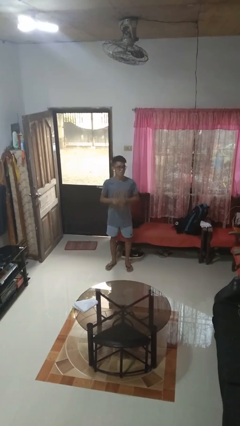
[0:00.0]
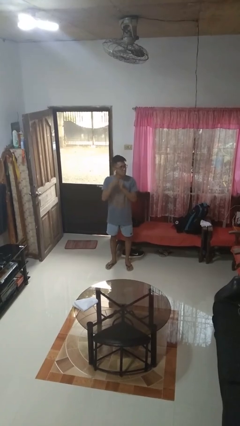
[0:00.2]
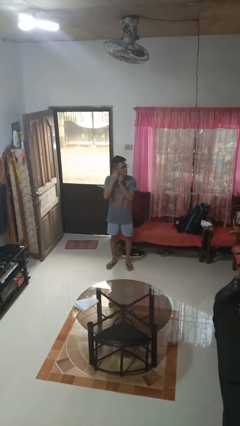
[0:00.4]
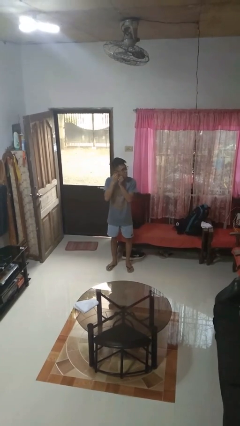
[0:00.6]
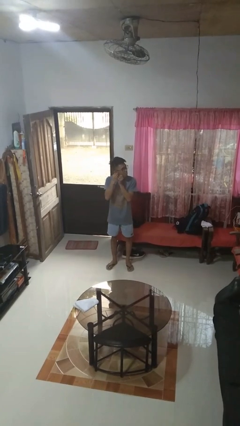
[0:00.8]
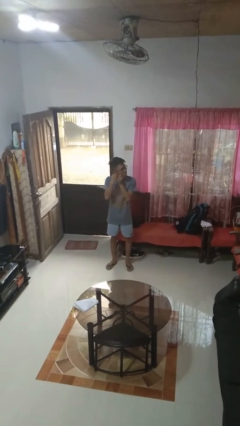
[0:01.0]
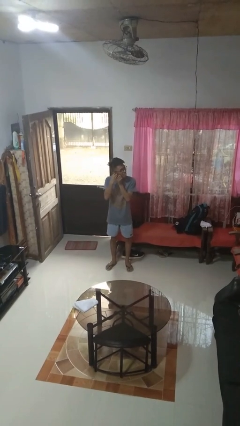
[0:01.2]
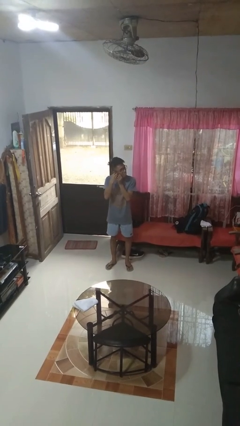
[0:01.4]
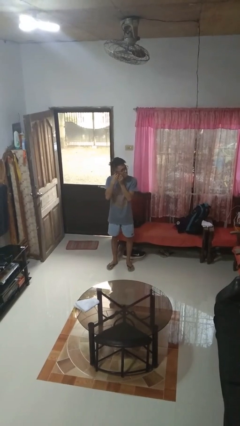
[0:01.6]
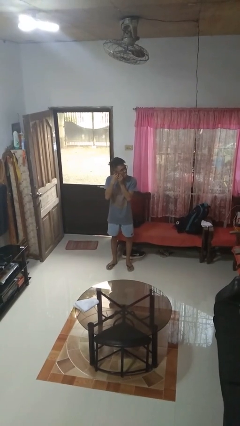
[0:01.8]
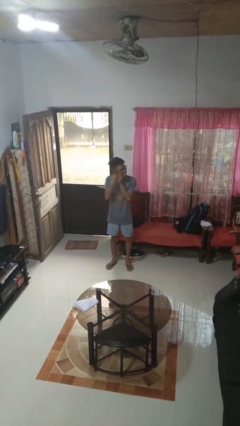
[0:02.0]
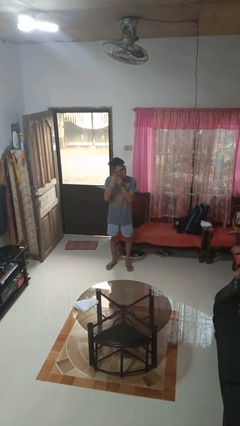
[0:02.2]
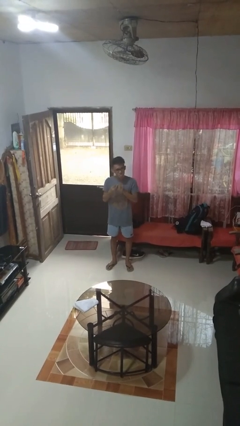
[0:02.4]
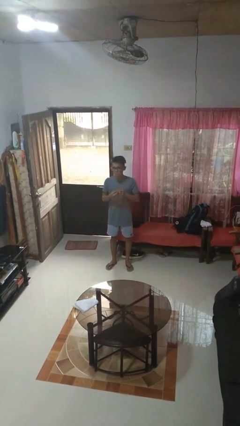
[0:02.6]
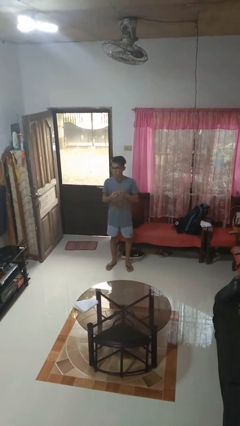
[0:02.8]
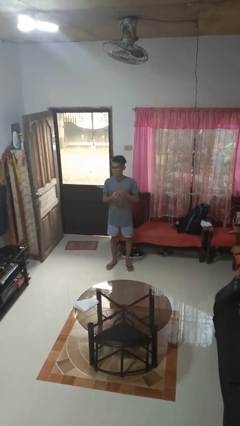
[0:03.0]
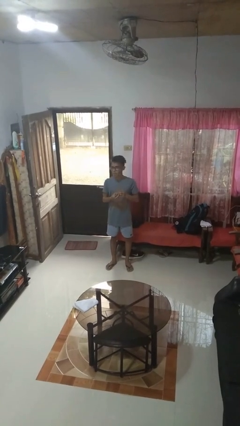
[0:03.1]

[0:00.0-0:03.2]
person takes off earrings

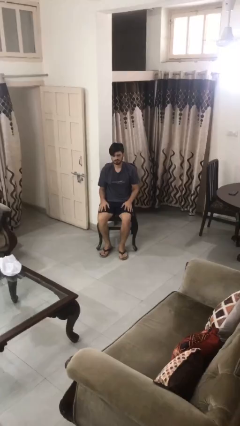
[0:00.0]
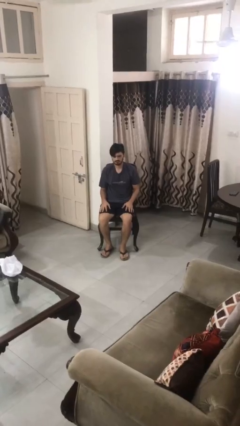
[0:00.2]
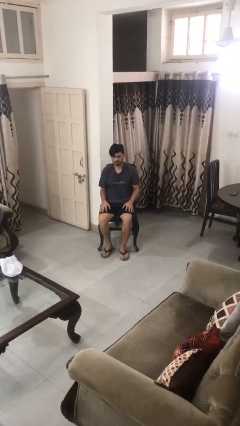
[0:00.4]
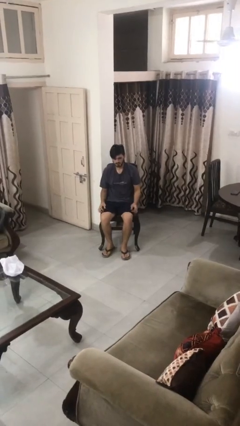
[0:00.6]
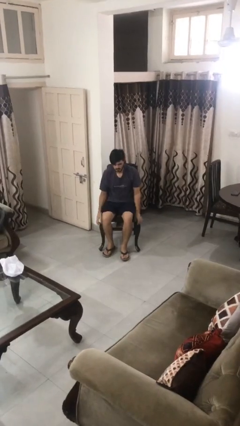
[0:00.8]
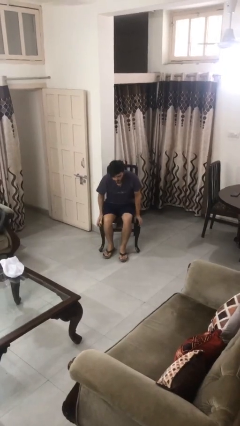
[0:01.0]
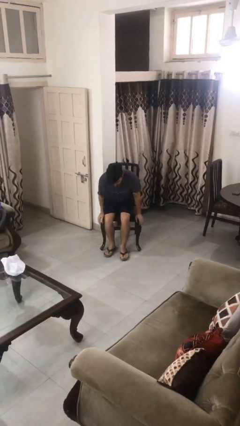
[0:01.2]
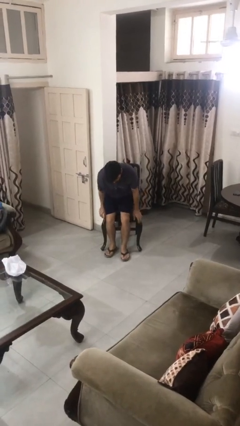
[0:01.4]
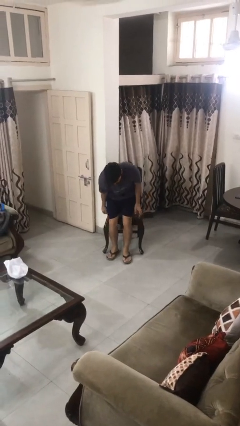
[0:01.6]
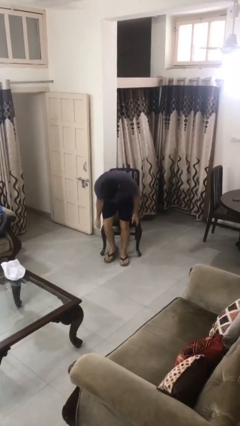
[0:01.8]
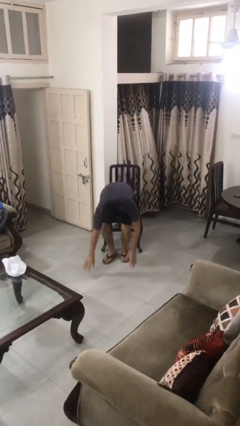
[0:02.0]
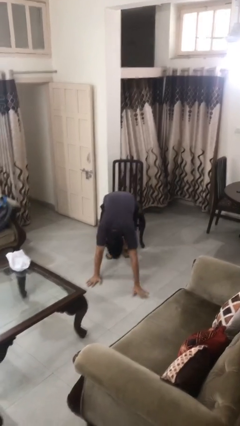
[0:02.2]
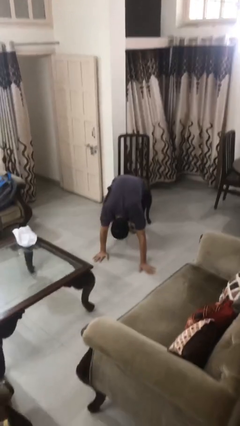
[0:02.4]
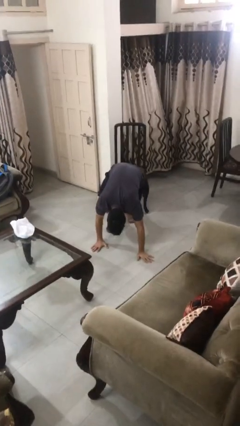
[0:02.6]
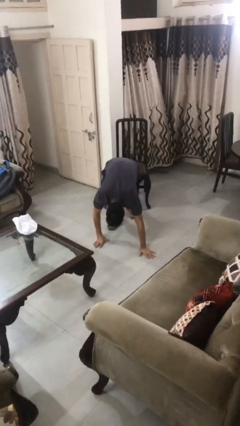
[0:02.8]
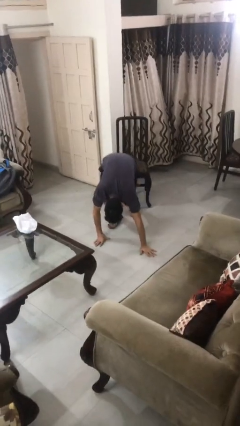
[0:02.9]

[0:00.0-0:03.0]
person falls from chair

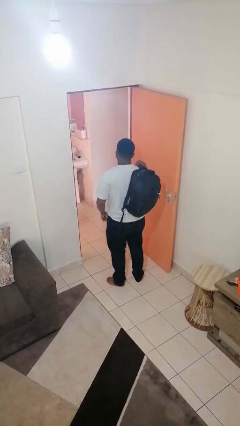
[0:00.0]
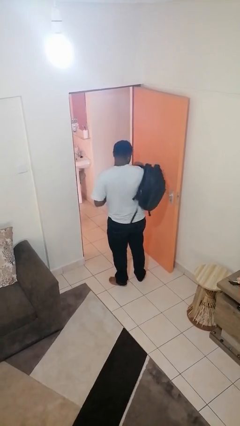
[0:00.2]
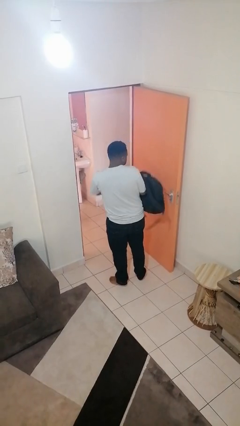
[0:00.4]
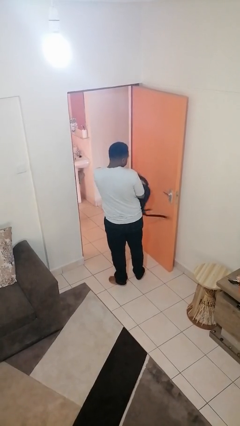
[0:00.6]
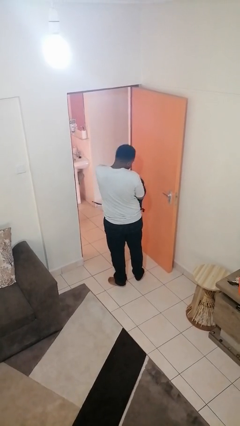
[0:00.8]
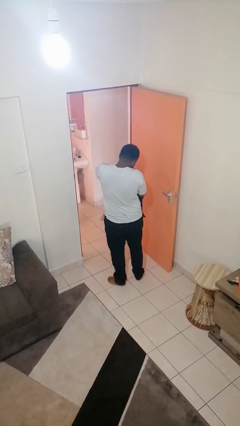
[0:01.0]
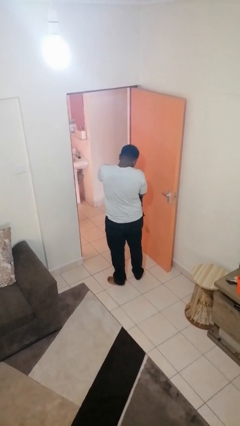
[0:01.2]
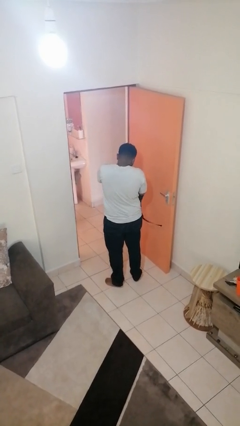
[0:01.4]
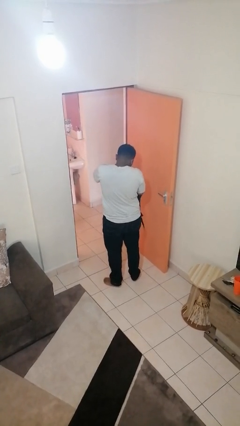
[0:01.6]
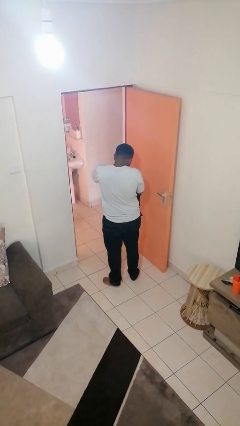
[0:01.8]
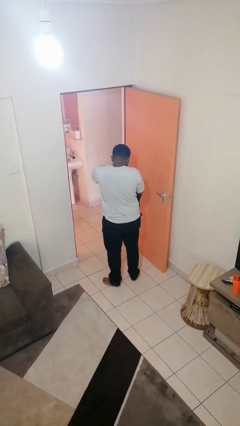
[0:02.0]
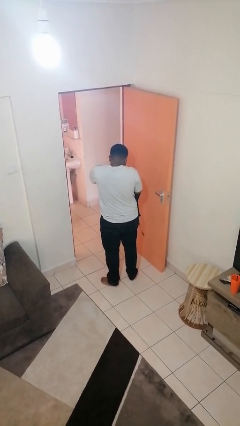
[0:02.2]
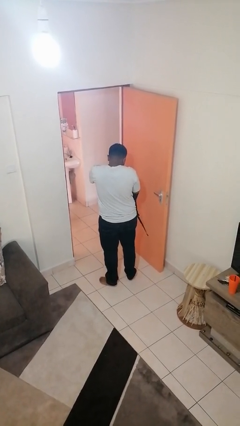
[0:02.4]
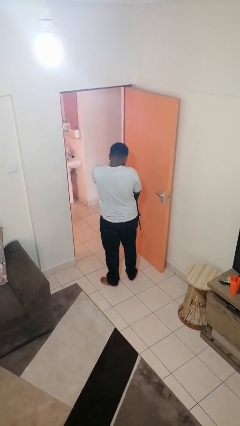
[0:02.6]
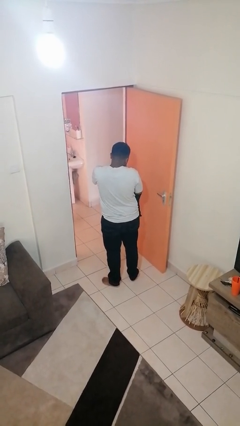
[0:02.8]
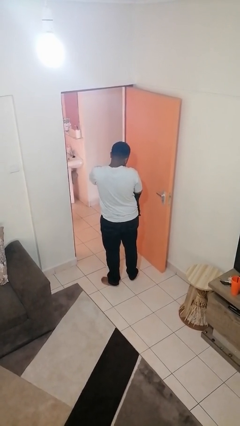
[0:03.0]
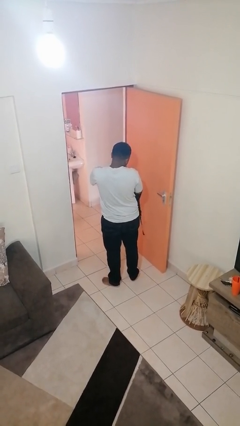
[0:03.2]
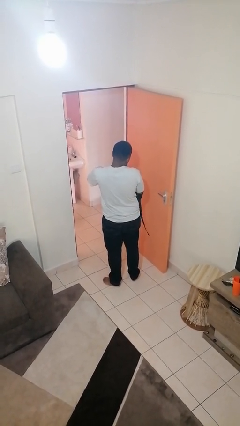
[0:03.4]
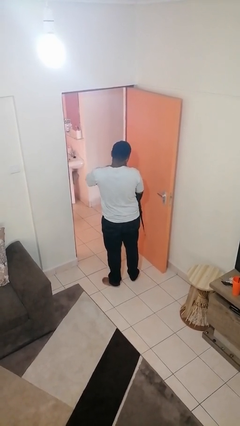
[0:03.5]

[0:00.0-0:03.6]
person searches in backpack

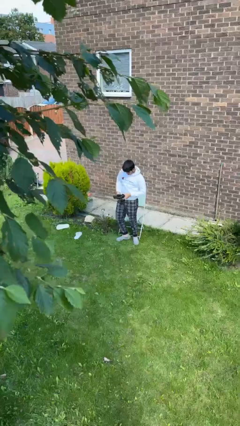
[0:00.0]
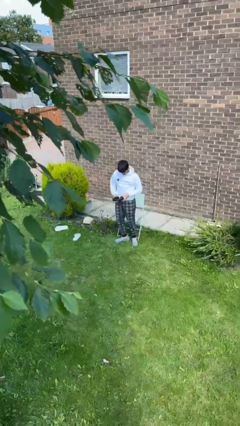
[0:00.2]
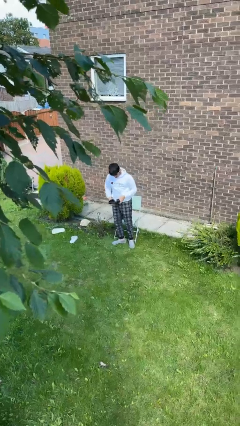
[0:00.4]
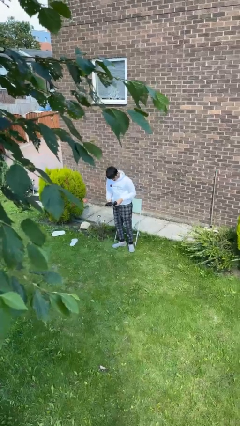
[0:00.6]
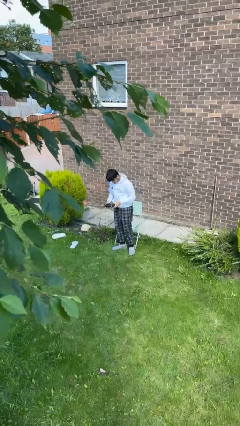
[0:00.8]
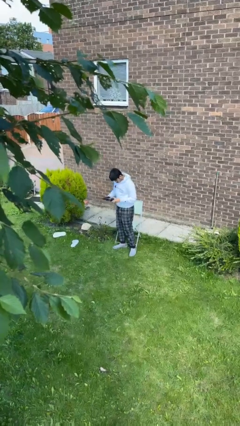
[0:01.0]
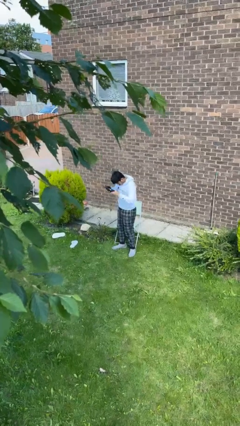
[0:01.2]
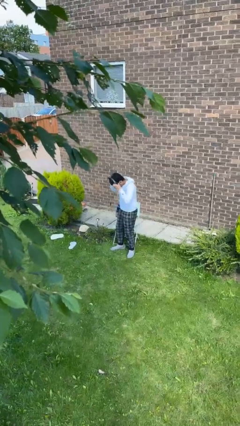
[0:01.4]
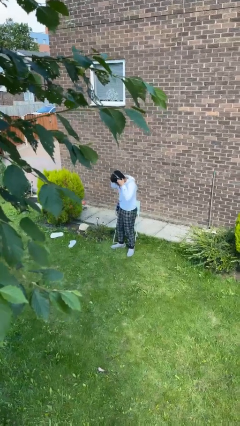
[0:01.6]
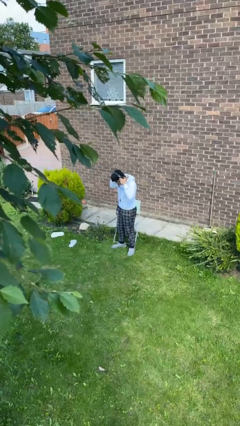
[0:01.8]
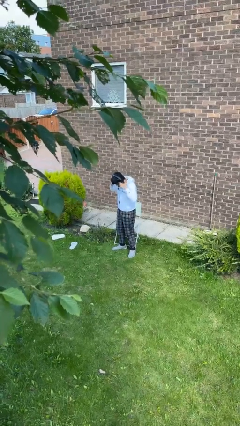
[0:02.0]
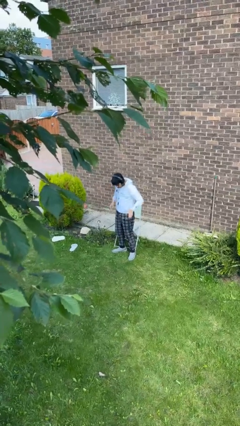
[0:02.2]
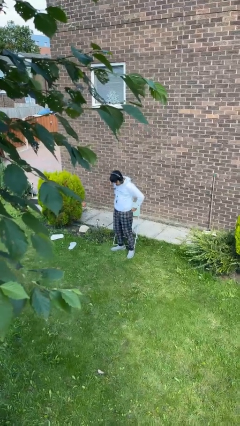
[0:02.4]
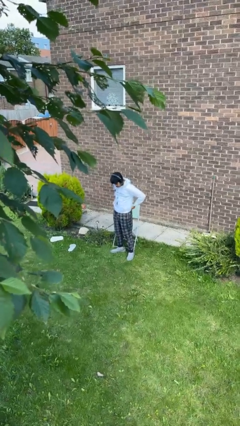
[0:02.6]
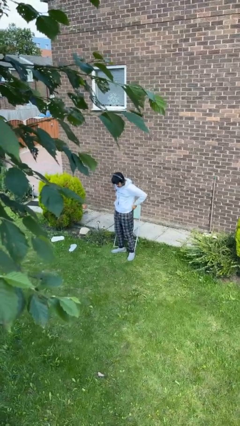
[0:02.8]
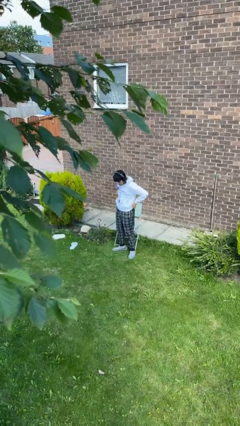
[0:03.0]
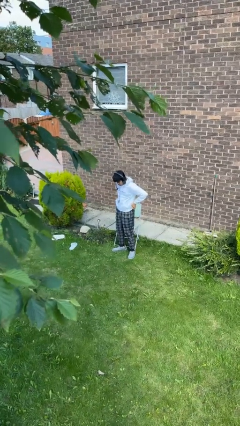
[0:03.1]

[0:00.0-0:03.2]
person puts on headphones

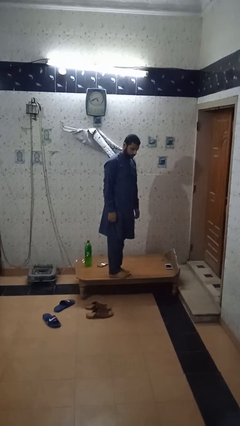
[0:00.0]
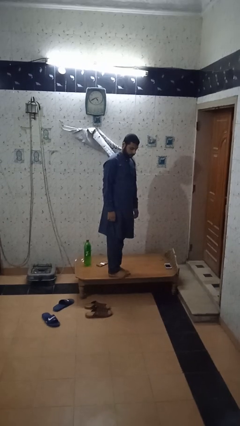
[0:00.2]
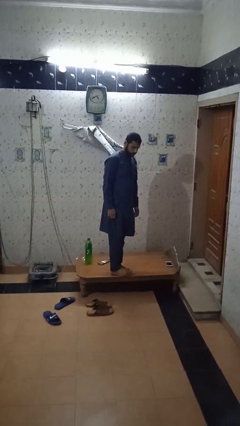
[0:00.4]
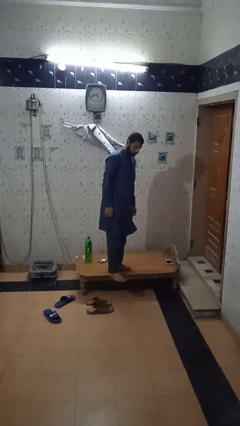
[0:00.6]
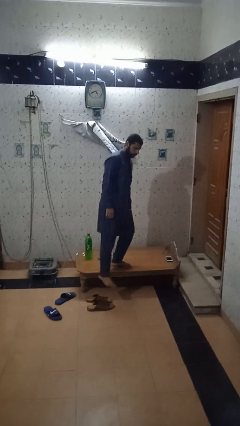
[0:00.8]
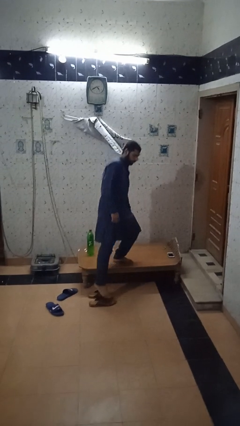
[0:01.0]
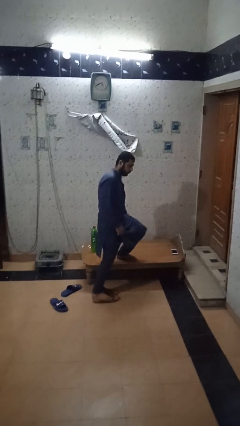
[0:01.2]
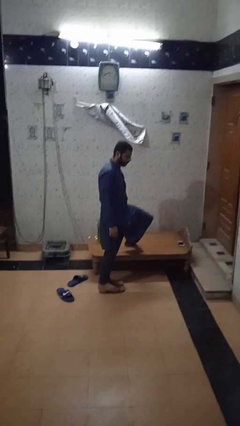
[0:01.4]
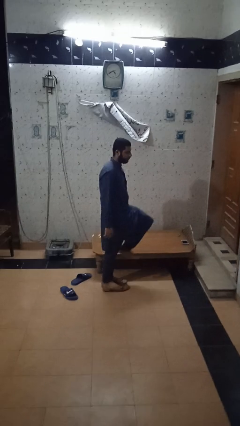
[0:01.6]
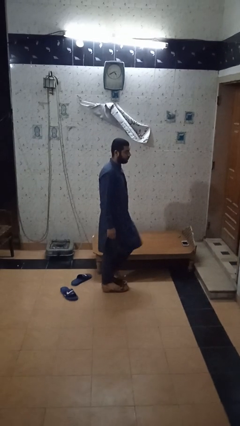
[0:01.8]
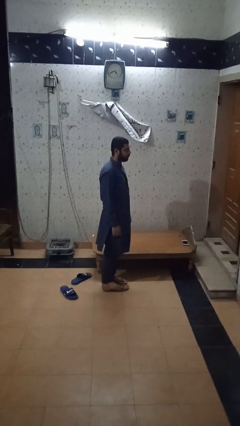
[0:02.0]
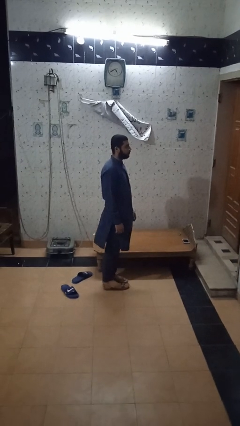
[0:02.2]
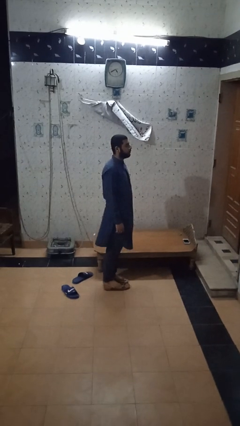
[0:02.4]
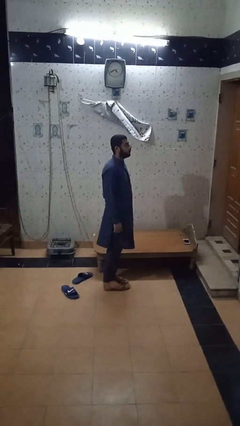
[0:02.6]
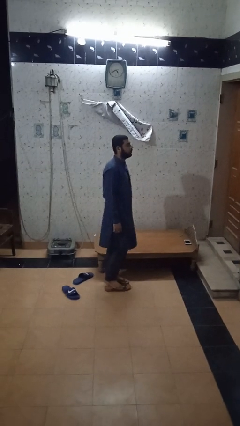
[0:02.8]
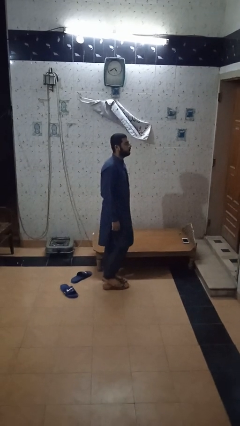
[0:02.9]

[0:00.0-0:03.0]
person climbs off table

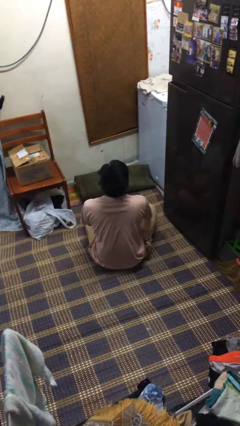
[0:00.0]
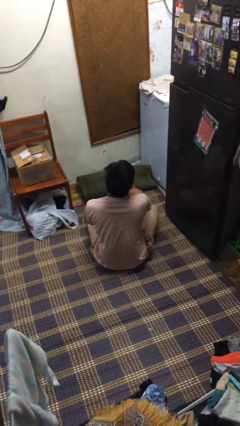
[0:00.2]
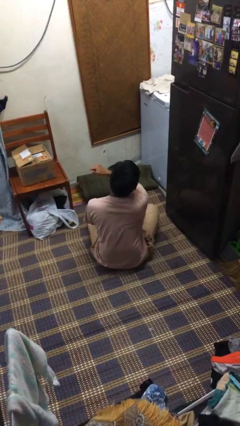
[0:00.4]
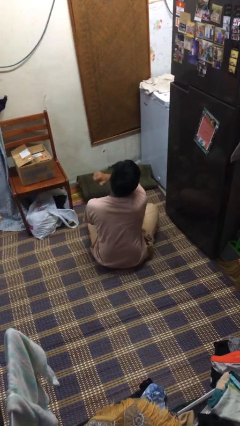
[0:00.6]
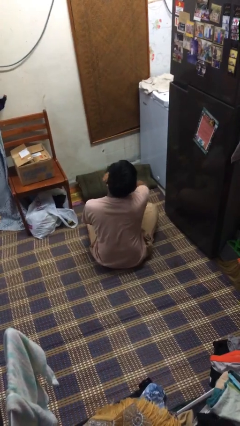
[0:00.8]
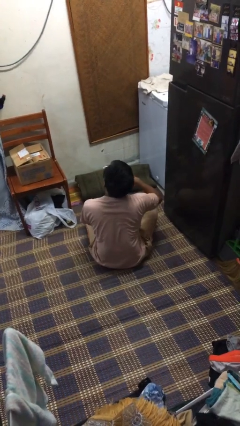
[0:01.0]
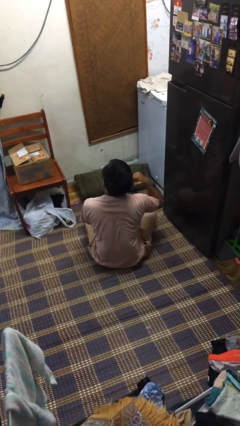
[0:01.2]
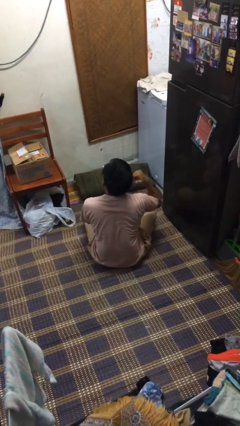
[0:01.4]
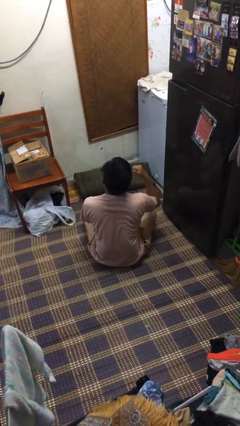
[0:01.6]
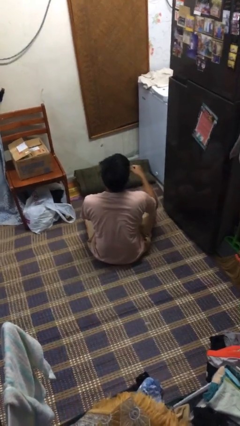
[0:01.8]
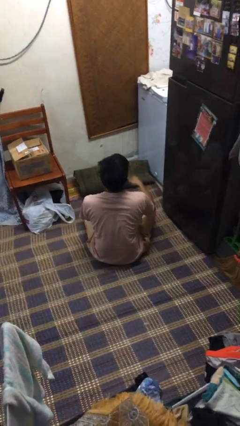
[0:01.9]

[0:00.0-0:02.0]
person gestures cut
